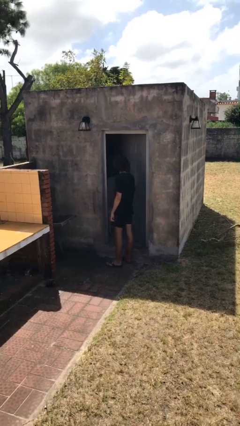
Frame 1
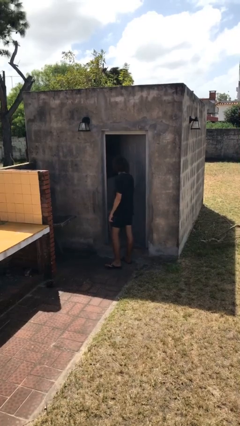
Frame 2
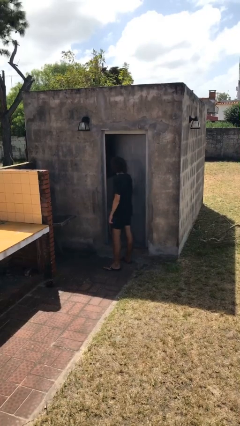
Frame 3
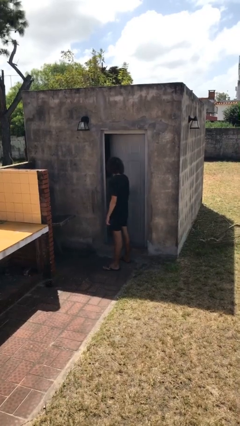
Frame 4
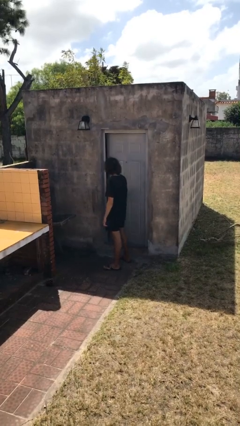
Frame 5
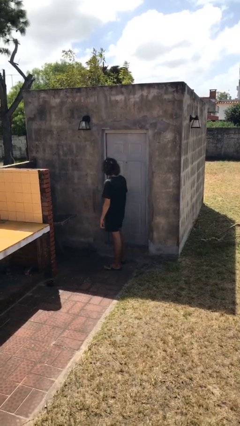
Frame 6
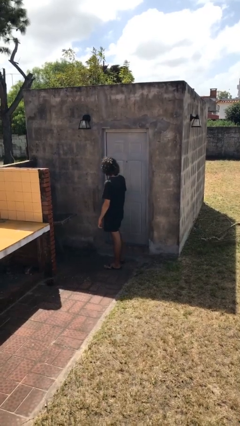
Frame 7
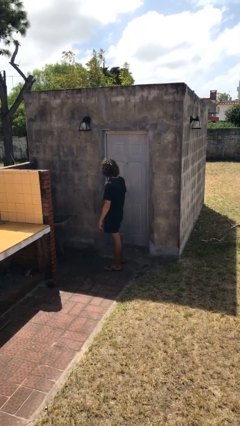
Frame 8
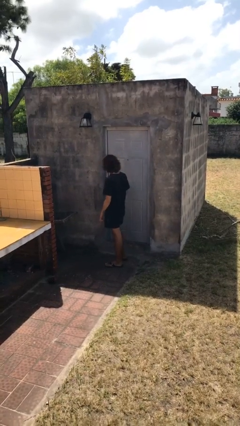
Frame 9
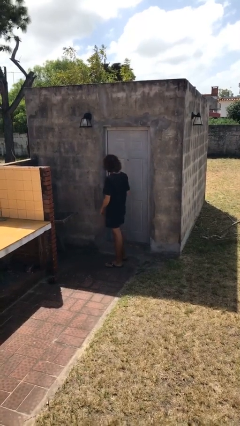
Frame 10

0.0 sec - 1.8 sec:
person closes facility door

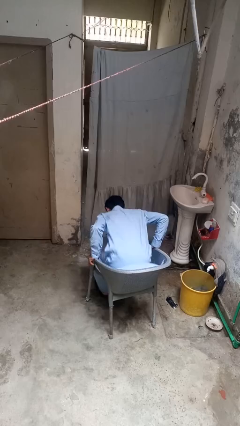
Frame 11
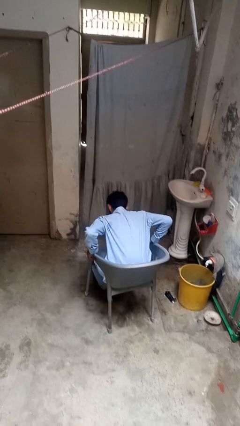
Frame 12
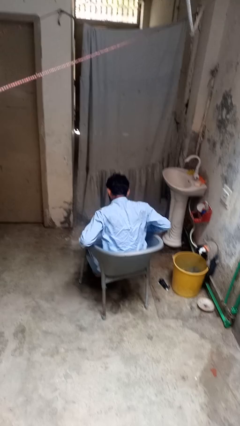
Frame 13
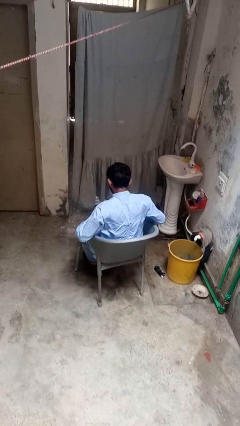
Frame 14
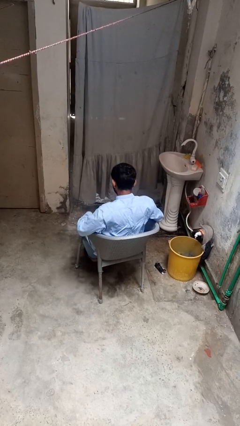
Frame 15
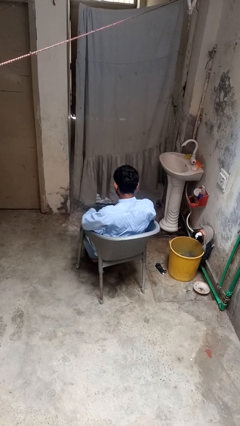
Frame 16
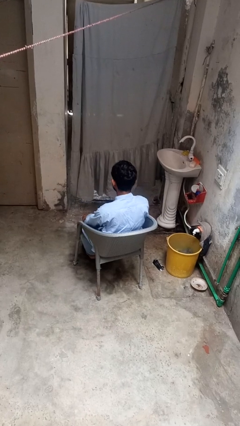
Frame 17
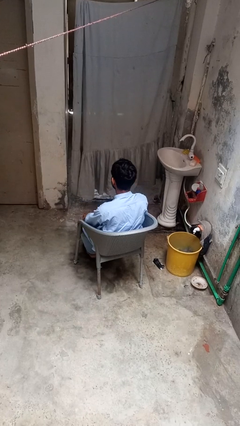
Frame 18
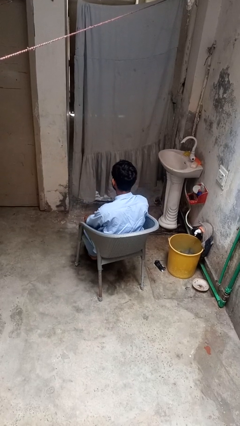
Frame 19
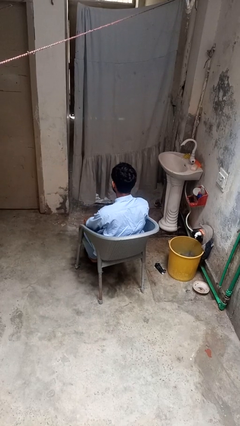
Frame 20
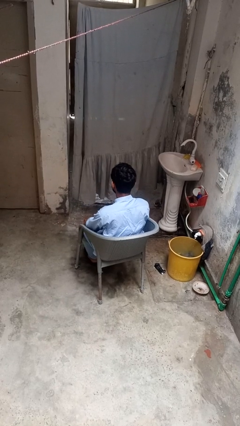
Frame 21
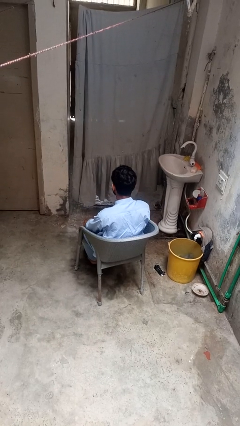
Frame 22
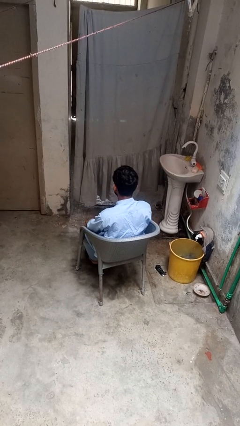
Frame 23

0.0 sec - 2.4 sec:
person sits down

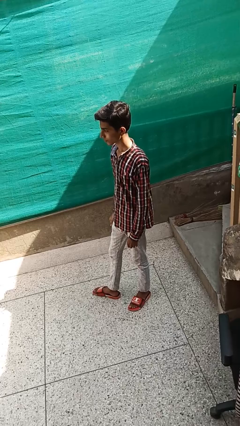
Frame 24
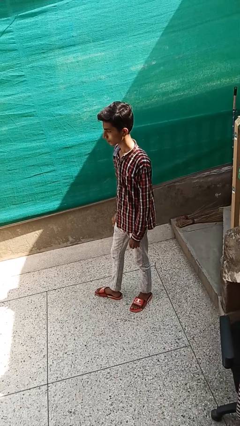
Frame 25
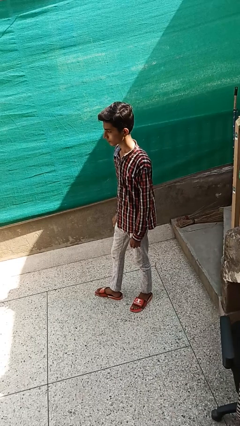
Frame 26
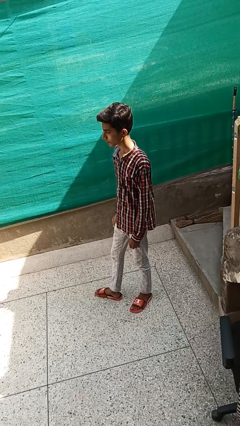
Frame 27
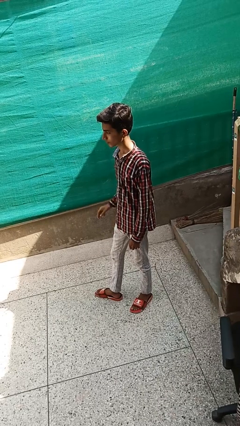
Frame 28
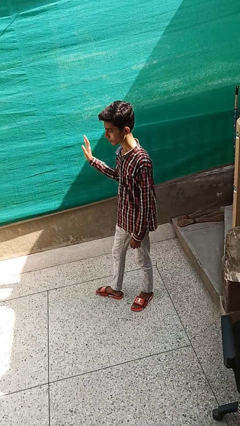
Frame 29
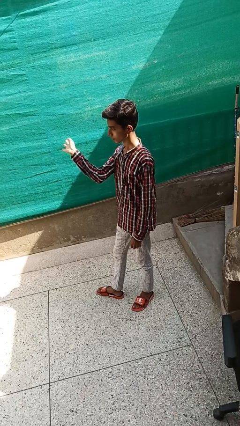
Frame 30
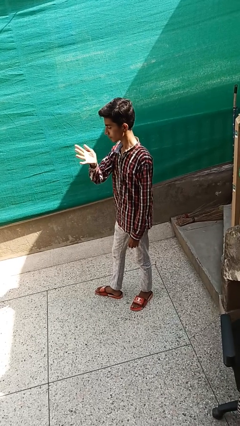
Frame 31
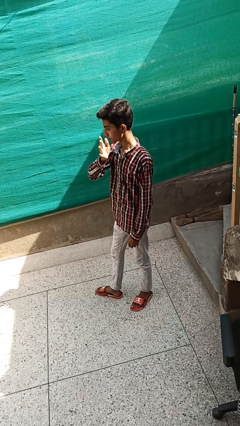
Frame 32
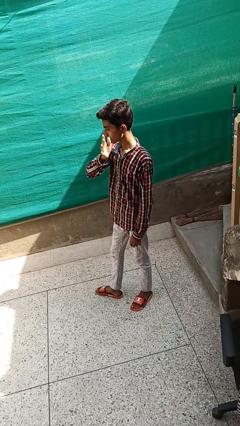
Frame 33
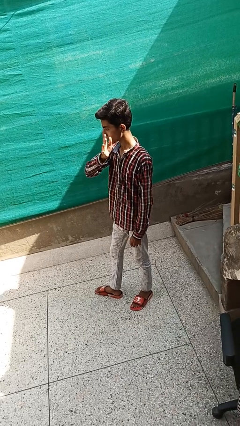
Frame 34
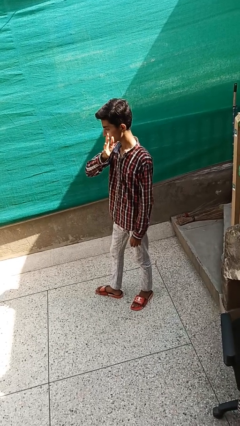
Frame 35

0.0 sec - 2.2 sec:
person gestures swipe left

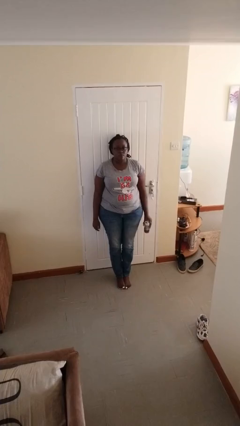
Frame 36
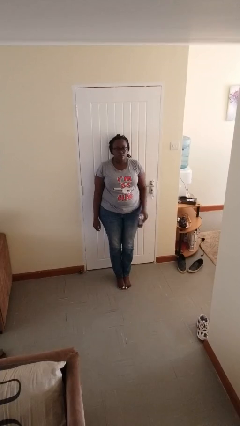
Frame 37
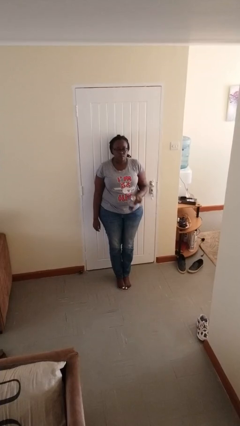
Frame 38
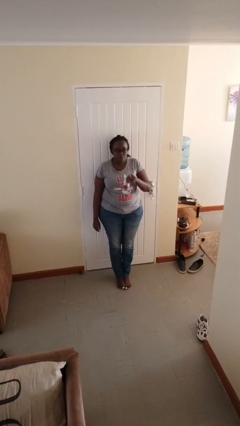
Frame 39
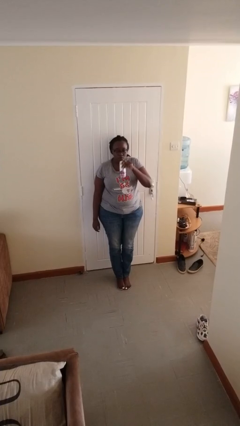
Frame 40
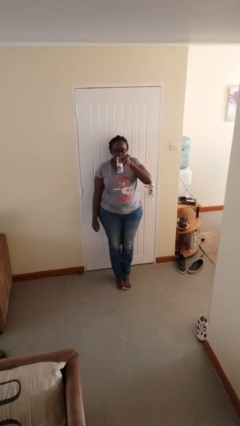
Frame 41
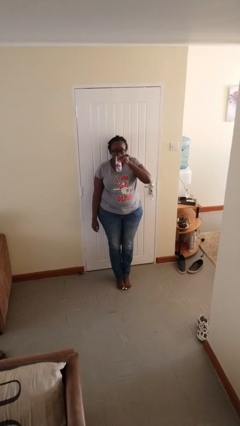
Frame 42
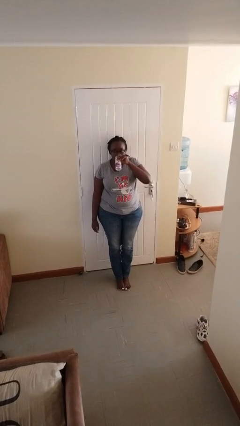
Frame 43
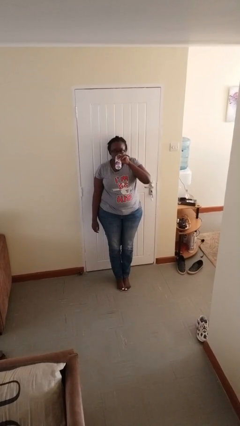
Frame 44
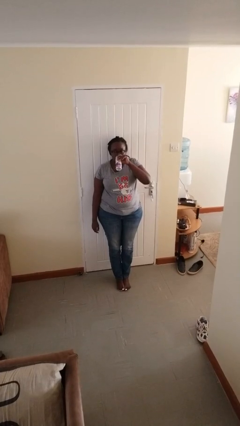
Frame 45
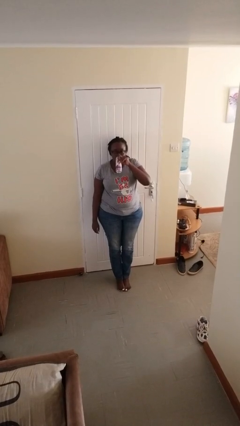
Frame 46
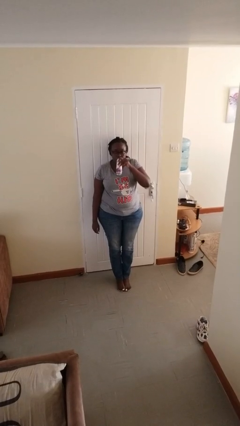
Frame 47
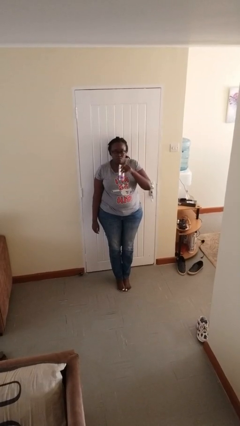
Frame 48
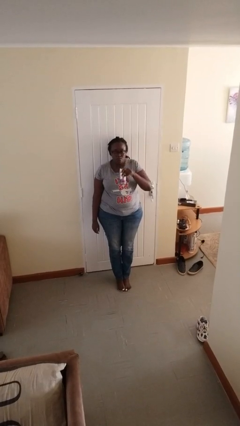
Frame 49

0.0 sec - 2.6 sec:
person drinks from beverage can

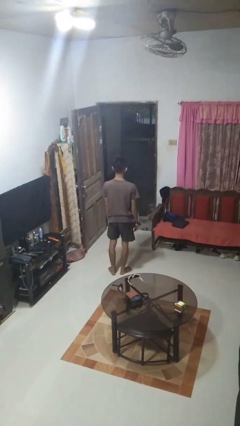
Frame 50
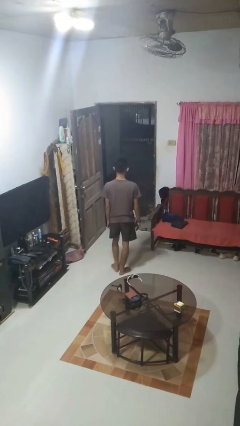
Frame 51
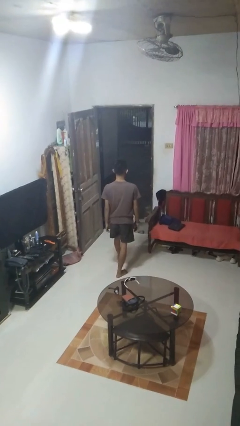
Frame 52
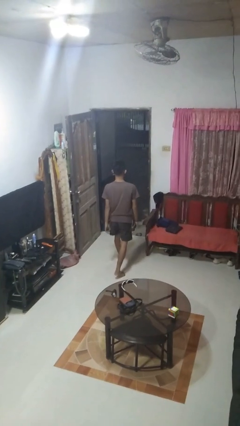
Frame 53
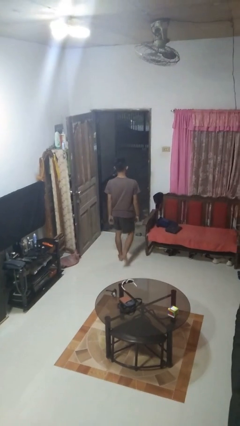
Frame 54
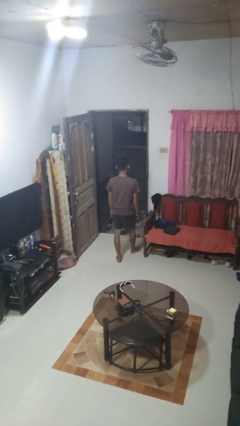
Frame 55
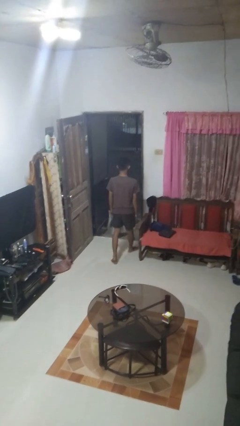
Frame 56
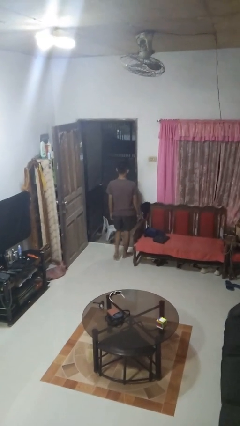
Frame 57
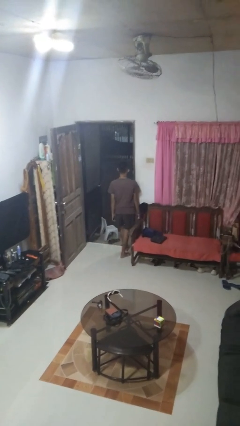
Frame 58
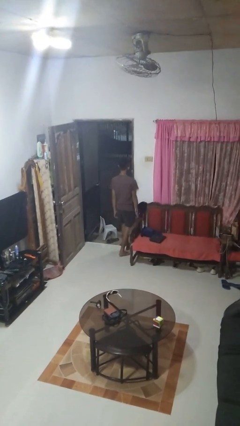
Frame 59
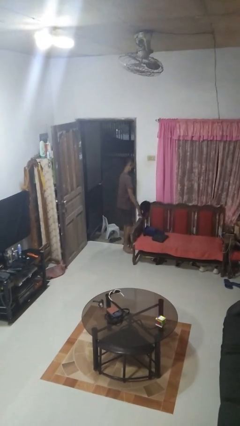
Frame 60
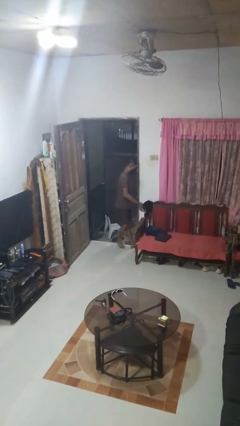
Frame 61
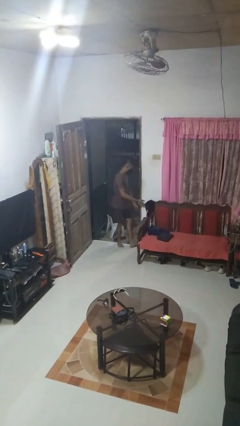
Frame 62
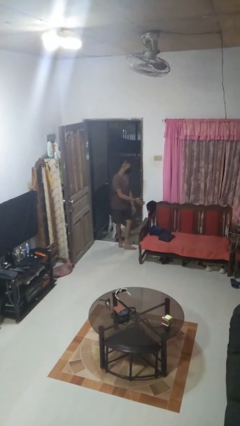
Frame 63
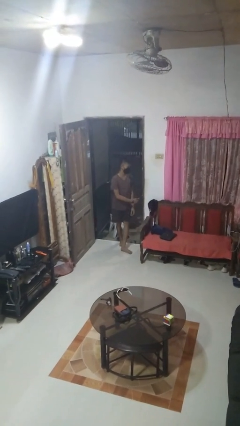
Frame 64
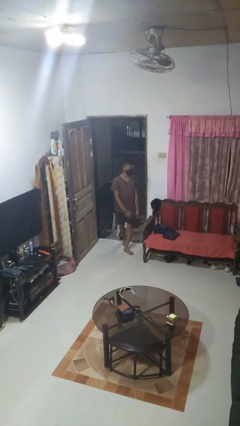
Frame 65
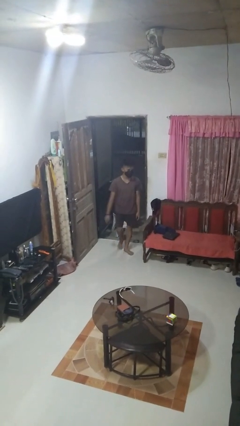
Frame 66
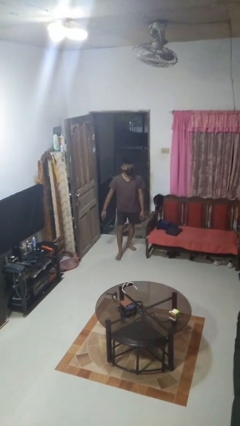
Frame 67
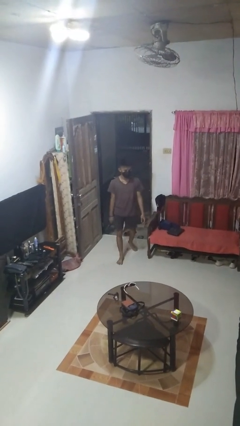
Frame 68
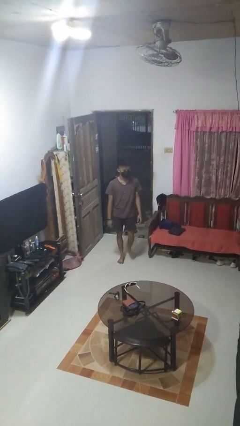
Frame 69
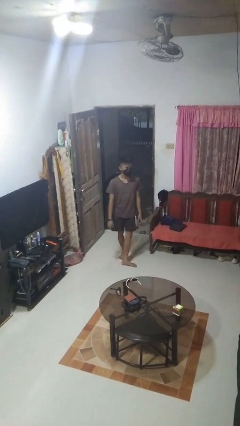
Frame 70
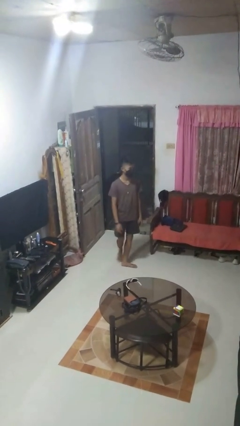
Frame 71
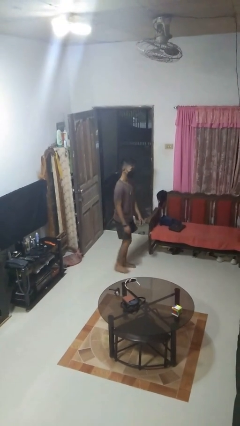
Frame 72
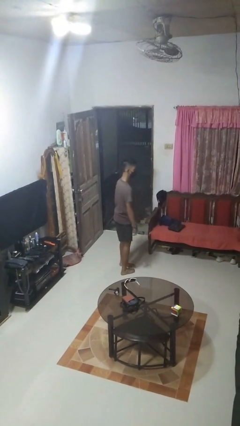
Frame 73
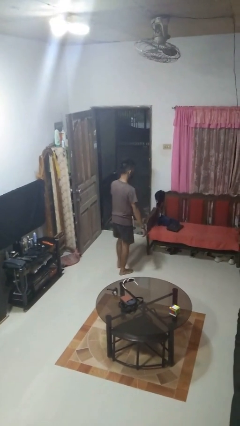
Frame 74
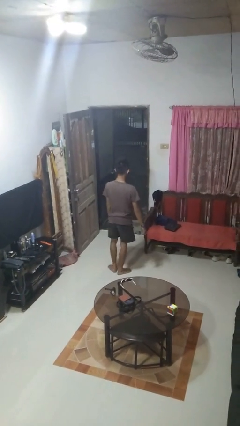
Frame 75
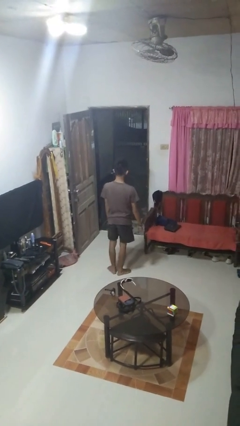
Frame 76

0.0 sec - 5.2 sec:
person bumps into wall

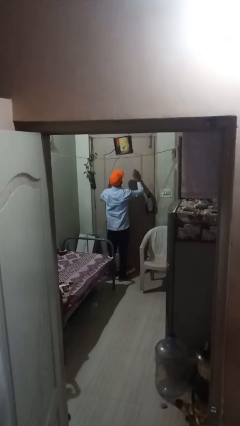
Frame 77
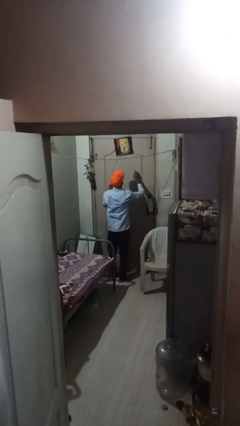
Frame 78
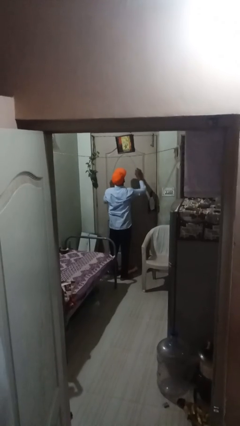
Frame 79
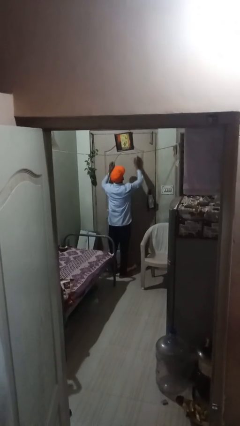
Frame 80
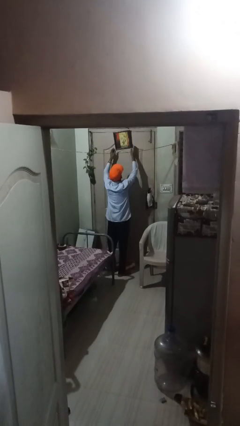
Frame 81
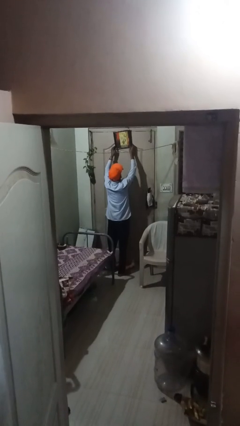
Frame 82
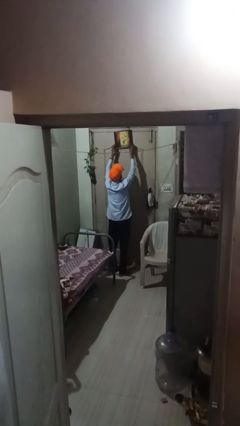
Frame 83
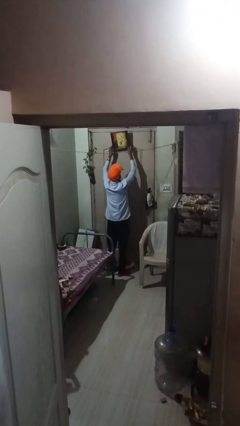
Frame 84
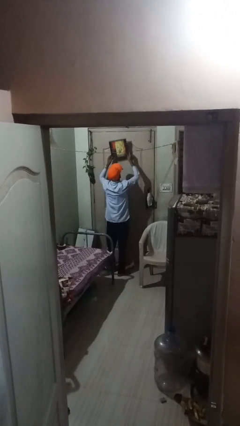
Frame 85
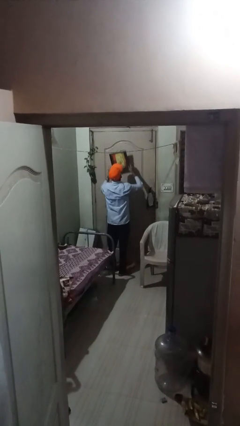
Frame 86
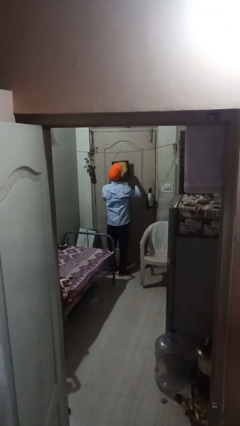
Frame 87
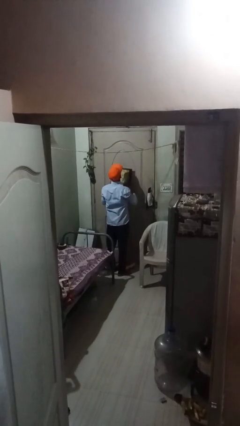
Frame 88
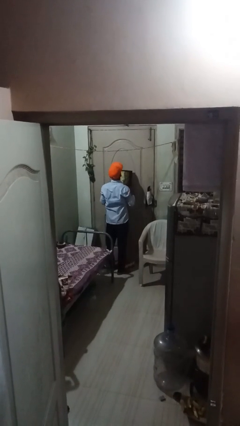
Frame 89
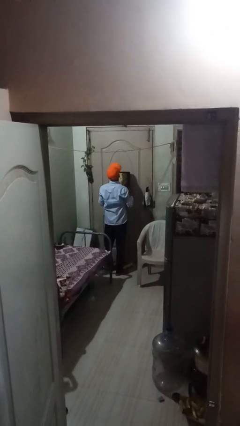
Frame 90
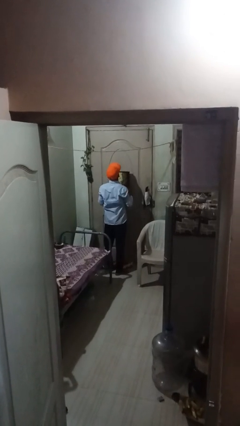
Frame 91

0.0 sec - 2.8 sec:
person takes down picture frame

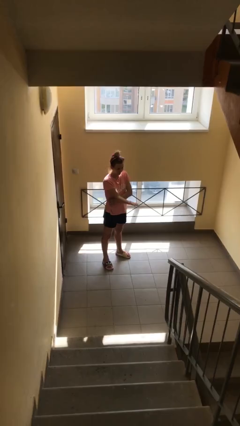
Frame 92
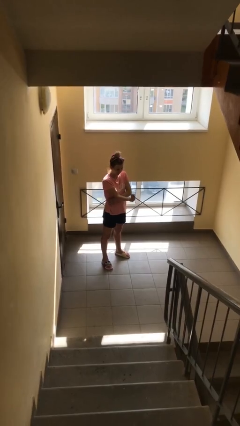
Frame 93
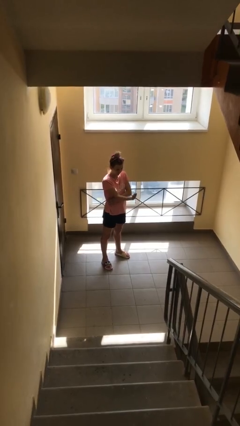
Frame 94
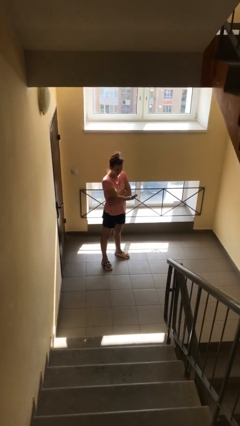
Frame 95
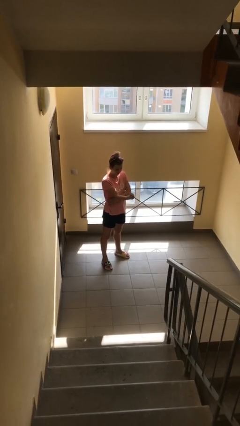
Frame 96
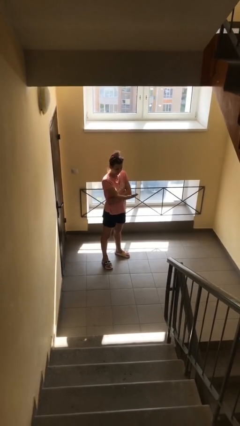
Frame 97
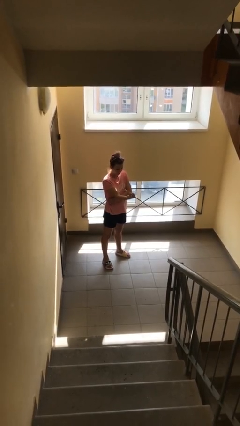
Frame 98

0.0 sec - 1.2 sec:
person gestures come here
